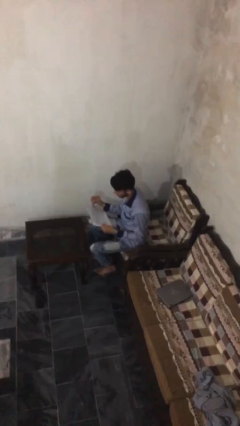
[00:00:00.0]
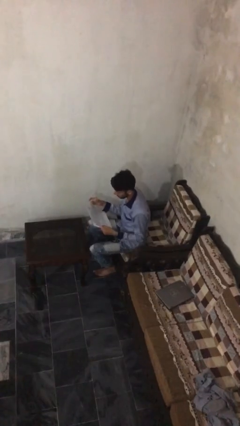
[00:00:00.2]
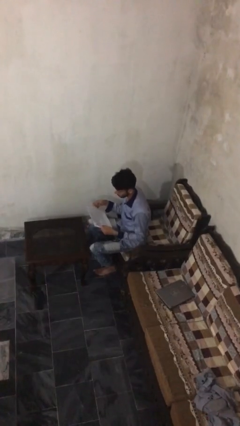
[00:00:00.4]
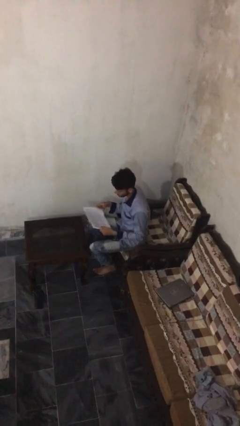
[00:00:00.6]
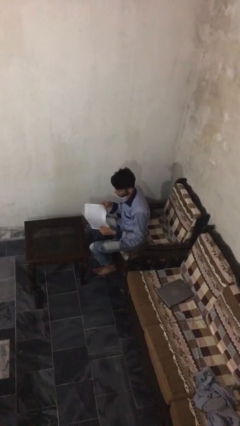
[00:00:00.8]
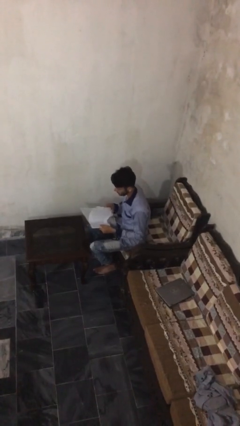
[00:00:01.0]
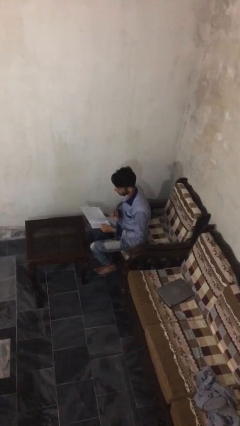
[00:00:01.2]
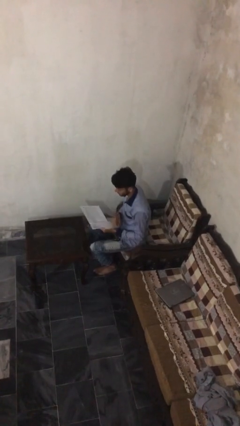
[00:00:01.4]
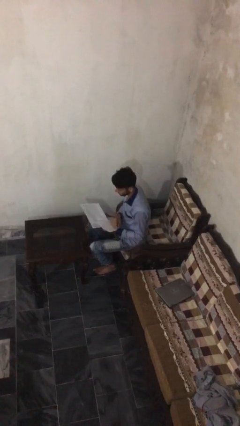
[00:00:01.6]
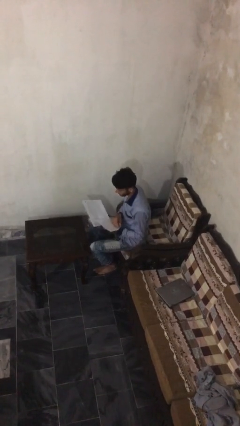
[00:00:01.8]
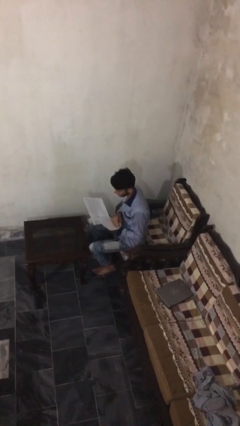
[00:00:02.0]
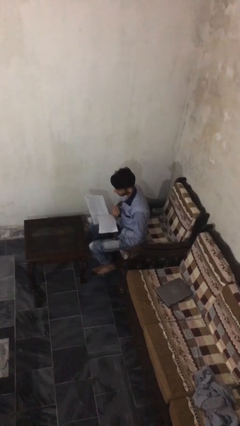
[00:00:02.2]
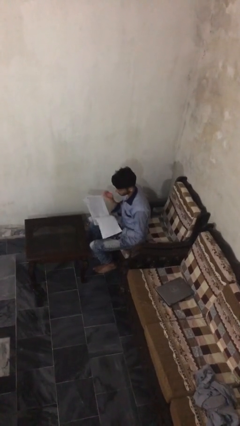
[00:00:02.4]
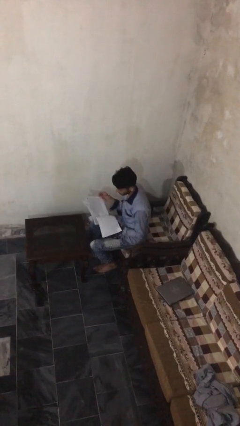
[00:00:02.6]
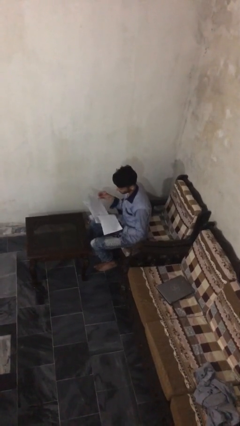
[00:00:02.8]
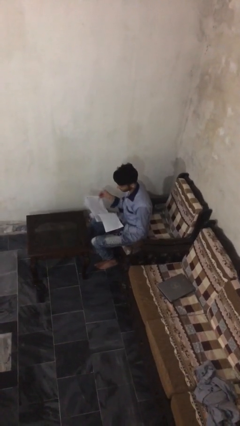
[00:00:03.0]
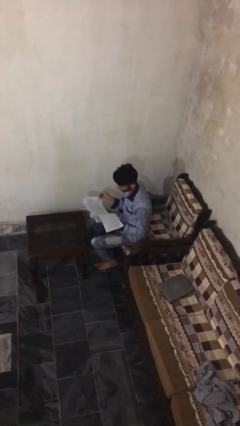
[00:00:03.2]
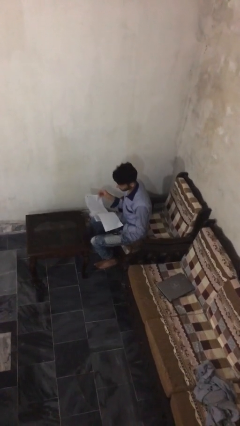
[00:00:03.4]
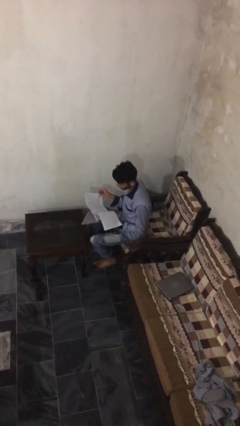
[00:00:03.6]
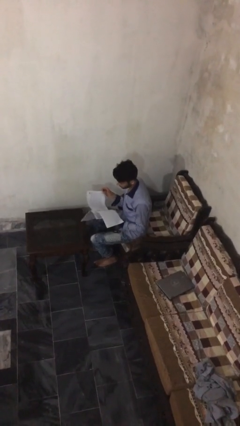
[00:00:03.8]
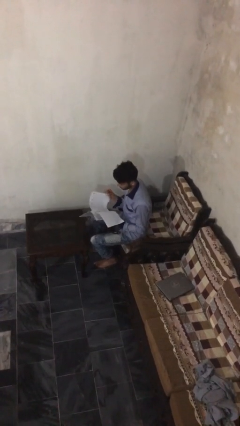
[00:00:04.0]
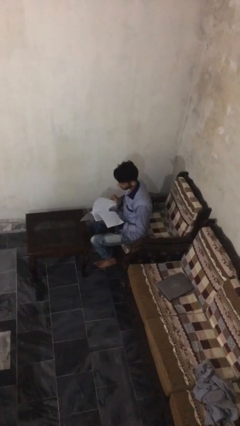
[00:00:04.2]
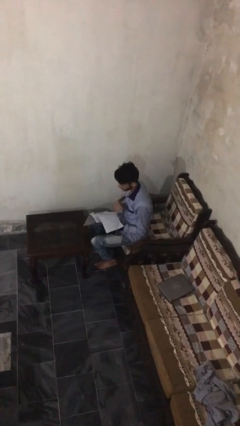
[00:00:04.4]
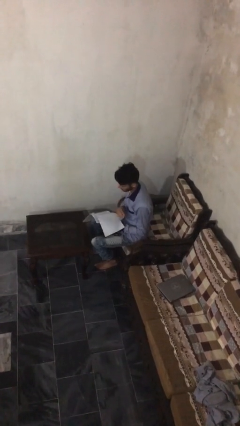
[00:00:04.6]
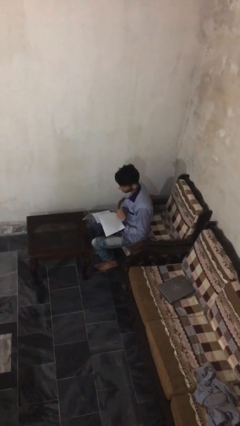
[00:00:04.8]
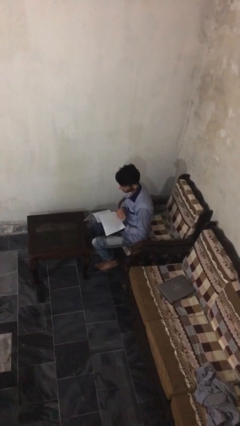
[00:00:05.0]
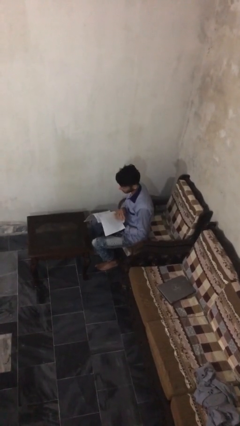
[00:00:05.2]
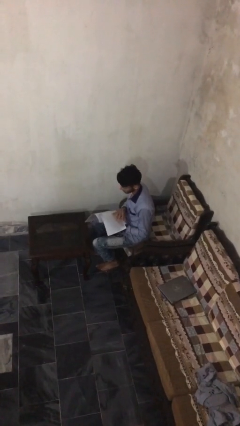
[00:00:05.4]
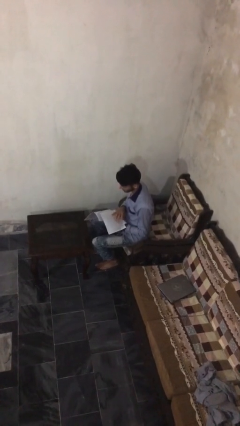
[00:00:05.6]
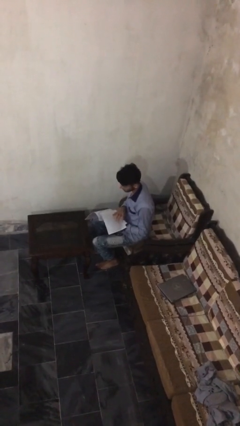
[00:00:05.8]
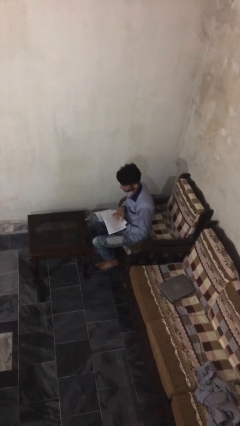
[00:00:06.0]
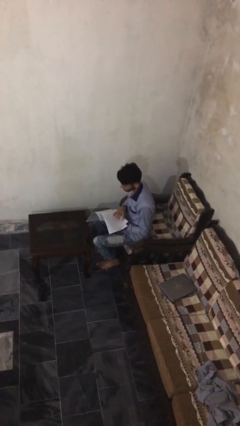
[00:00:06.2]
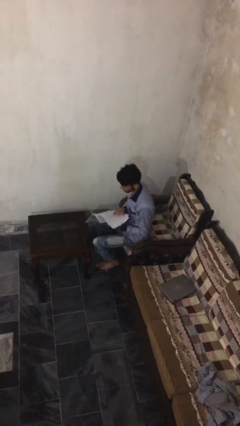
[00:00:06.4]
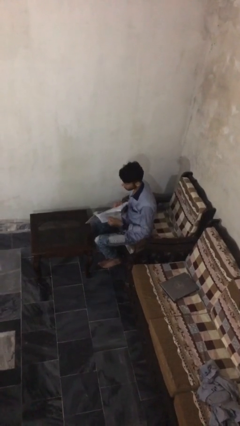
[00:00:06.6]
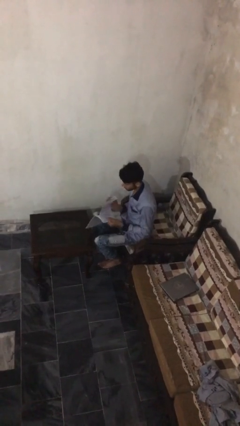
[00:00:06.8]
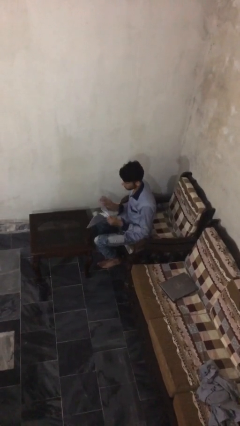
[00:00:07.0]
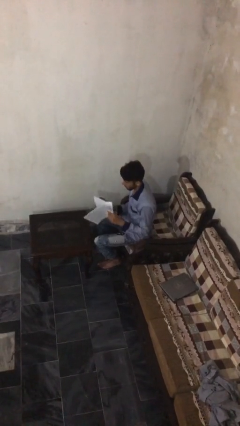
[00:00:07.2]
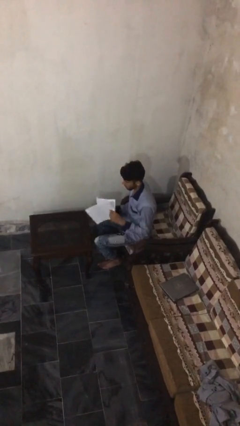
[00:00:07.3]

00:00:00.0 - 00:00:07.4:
person reads document

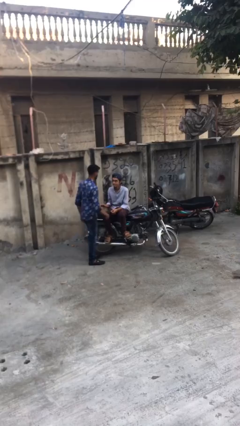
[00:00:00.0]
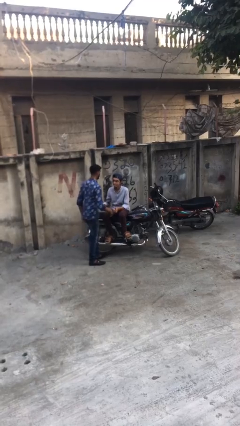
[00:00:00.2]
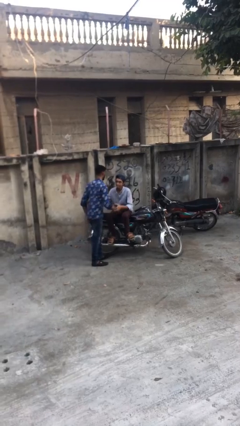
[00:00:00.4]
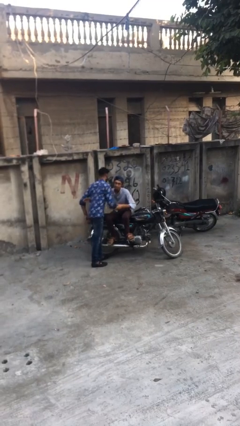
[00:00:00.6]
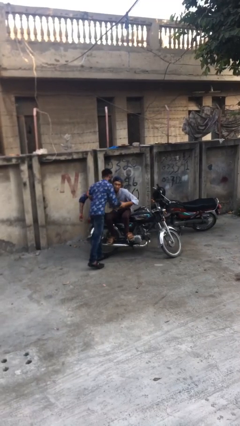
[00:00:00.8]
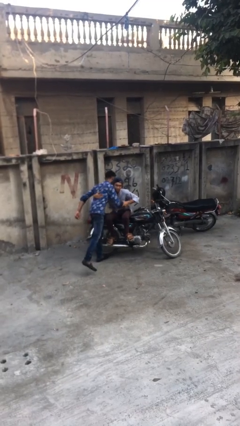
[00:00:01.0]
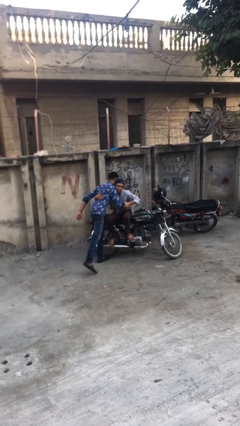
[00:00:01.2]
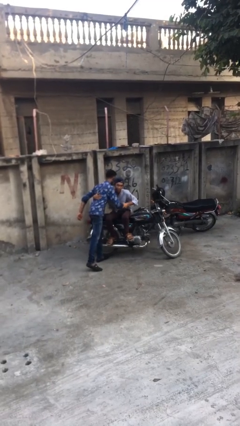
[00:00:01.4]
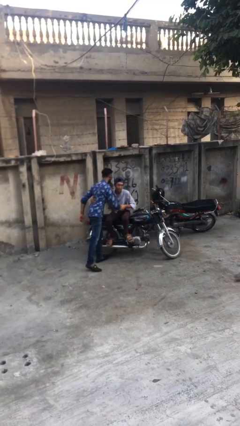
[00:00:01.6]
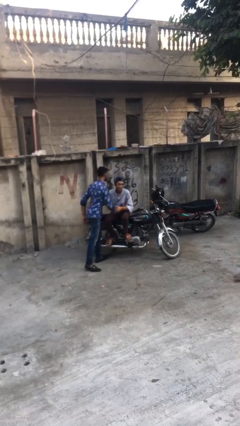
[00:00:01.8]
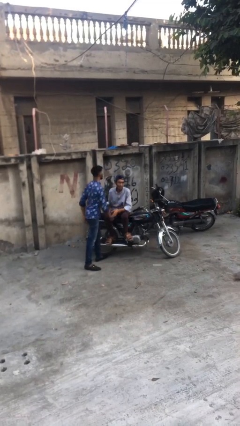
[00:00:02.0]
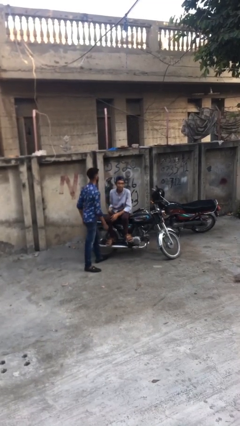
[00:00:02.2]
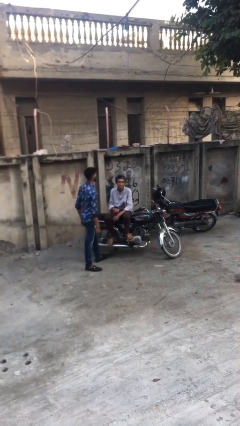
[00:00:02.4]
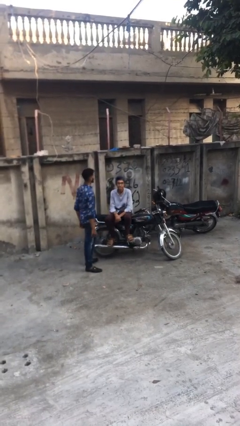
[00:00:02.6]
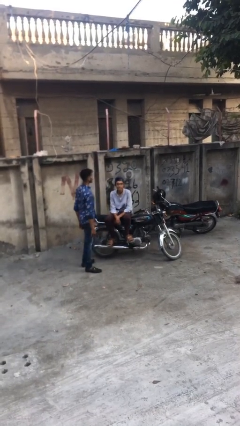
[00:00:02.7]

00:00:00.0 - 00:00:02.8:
person embraces person

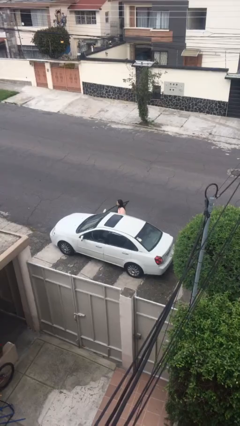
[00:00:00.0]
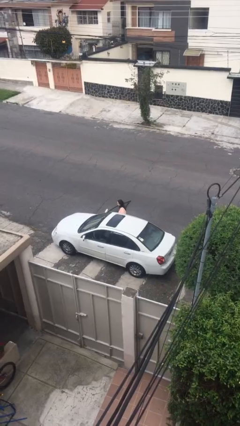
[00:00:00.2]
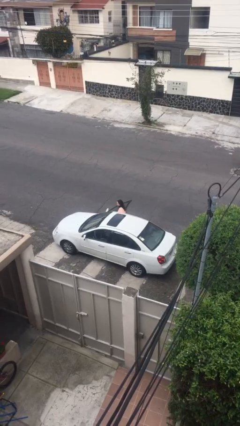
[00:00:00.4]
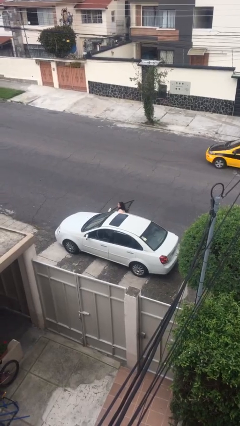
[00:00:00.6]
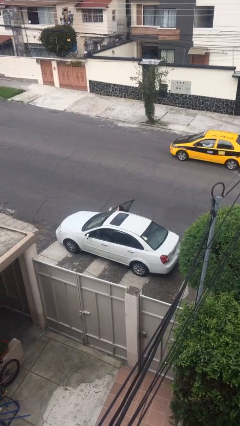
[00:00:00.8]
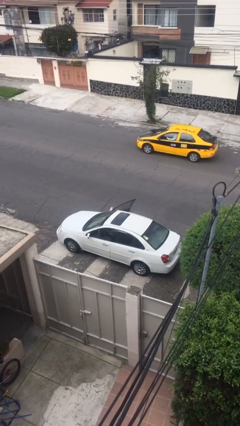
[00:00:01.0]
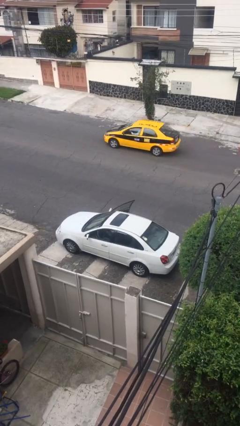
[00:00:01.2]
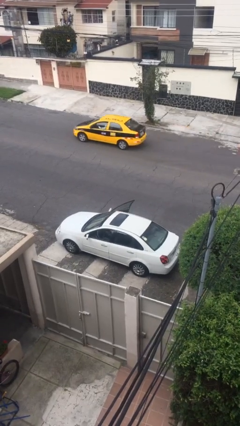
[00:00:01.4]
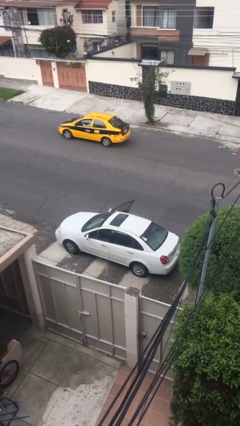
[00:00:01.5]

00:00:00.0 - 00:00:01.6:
person enters car

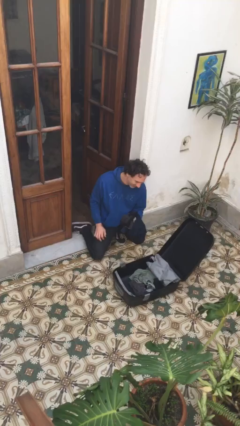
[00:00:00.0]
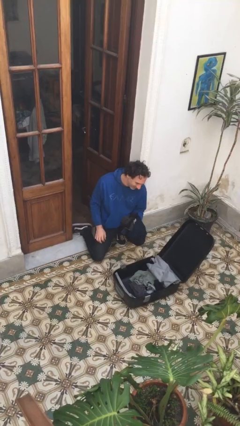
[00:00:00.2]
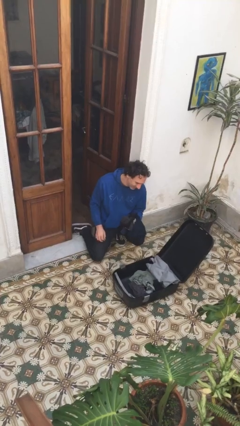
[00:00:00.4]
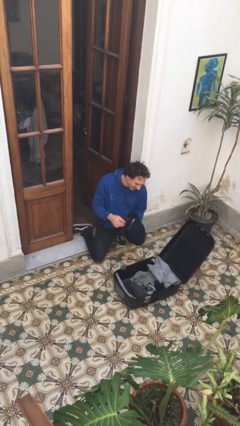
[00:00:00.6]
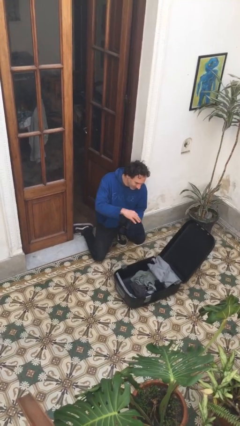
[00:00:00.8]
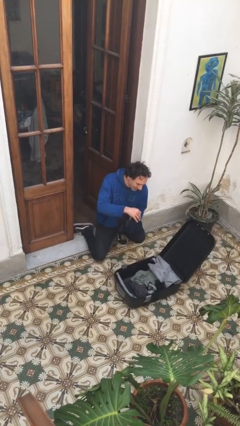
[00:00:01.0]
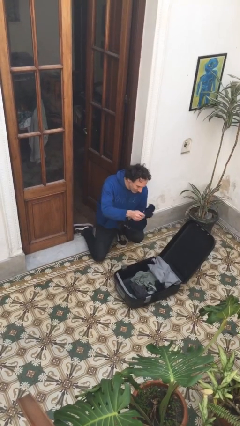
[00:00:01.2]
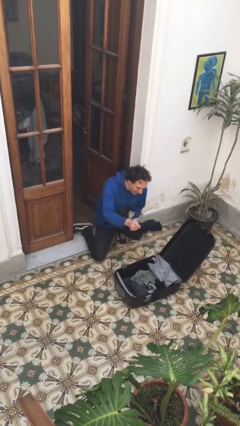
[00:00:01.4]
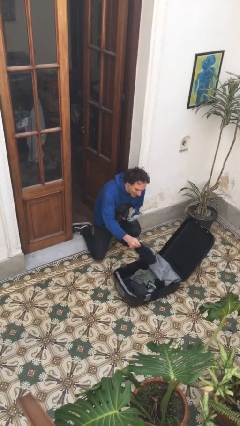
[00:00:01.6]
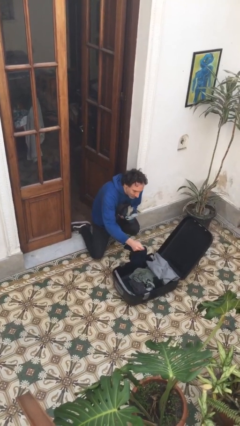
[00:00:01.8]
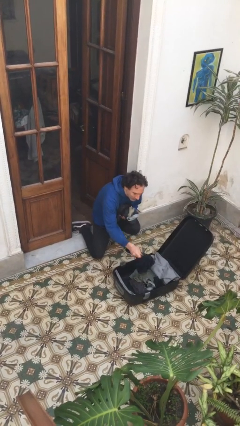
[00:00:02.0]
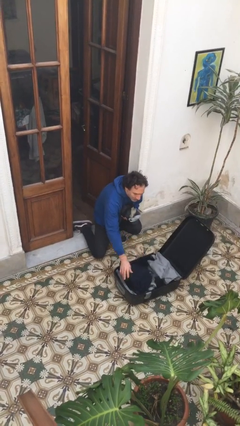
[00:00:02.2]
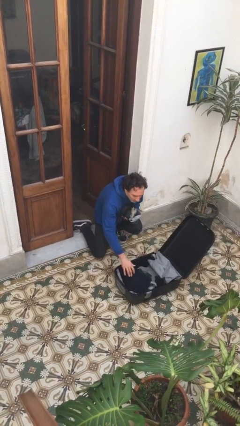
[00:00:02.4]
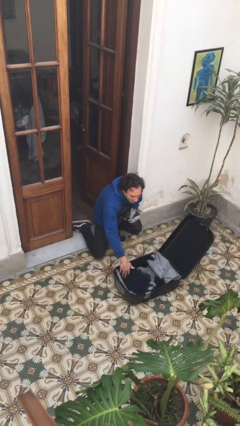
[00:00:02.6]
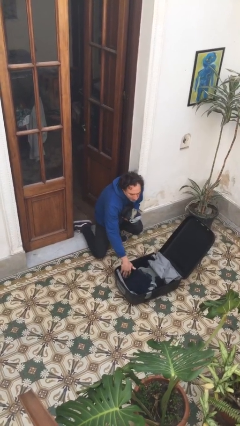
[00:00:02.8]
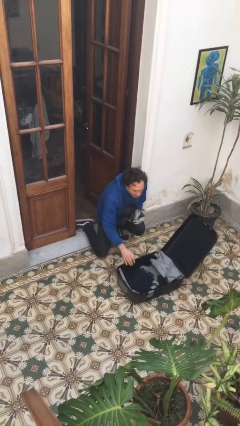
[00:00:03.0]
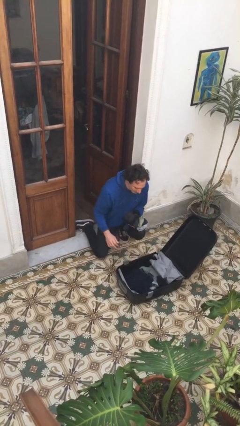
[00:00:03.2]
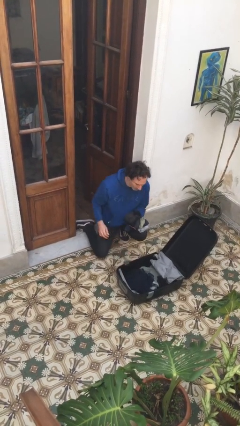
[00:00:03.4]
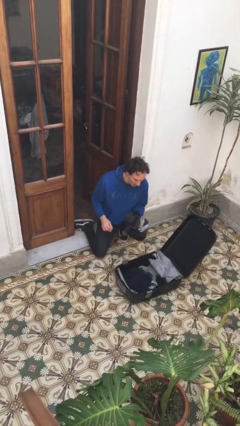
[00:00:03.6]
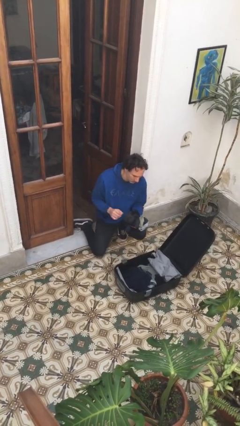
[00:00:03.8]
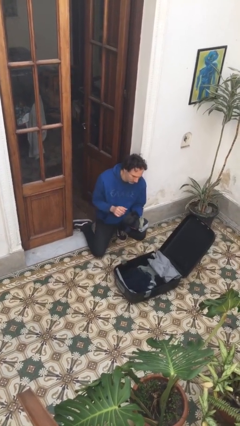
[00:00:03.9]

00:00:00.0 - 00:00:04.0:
person loads clothes into suitcase

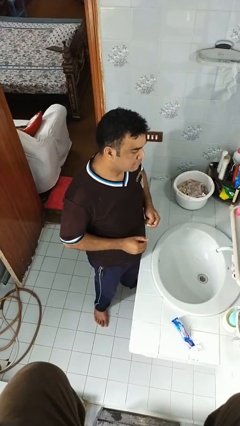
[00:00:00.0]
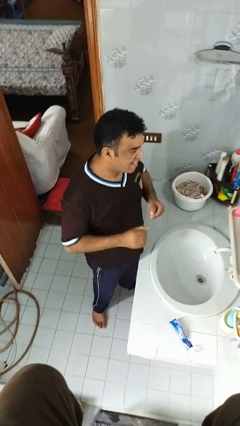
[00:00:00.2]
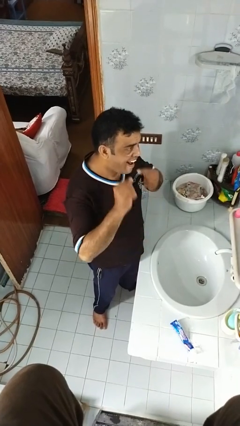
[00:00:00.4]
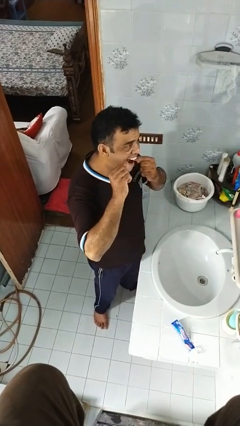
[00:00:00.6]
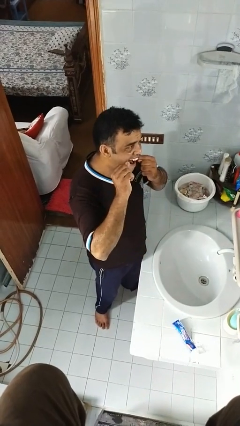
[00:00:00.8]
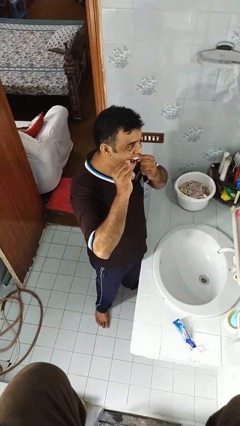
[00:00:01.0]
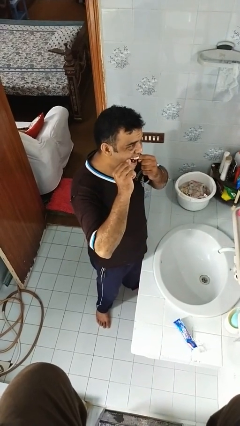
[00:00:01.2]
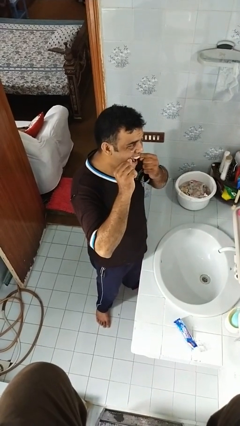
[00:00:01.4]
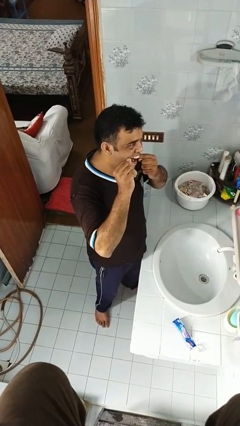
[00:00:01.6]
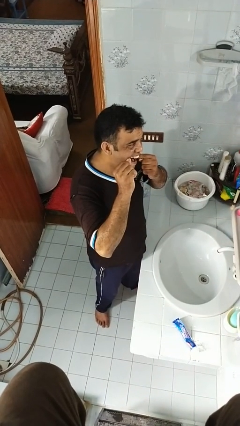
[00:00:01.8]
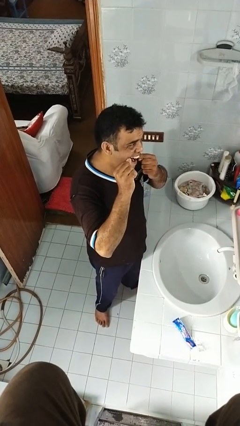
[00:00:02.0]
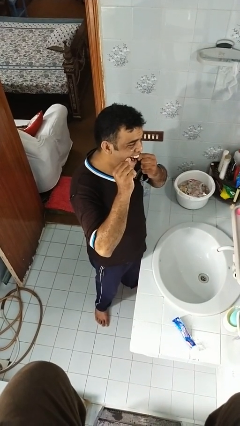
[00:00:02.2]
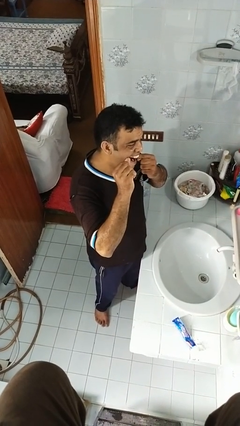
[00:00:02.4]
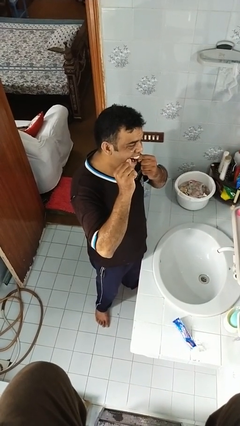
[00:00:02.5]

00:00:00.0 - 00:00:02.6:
person flosses
